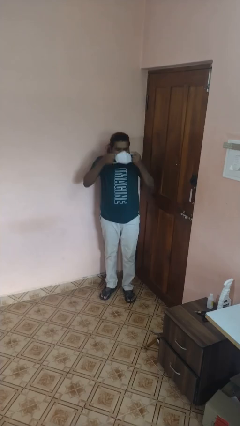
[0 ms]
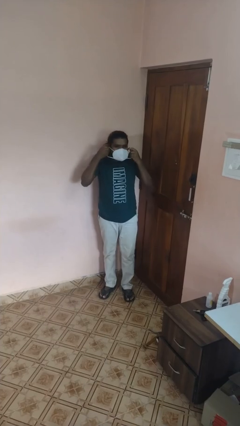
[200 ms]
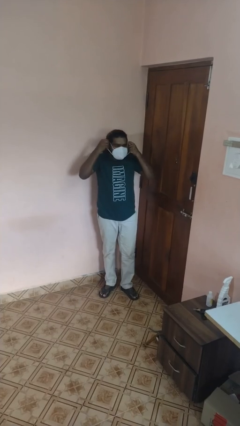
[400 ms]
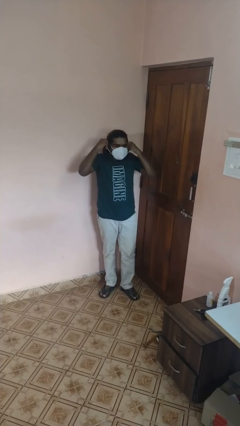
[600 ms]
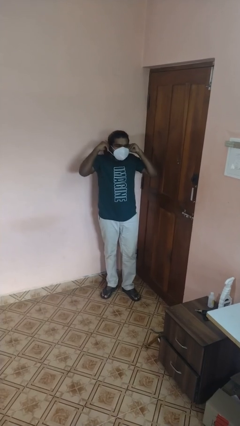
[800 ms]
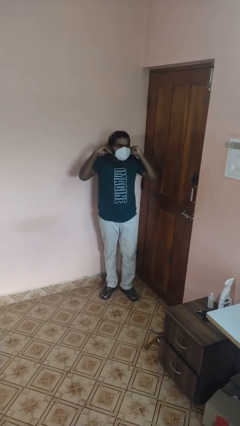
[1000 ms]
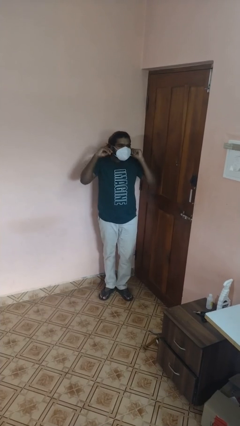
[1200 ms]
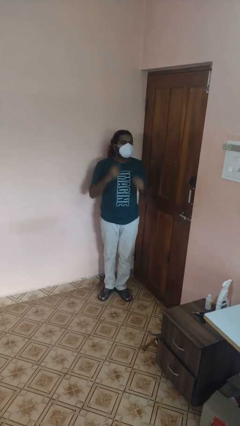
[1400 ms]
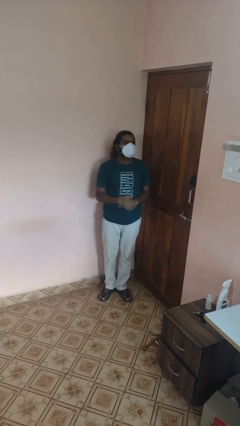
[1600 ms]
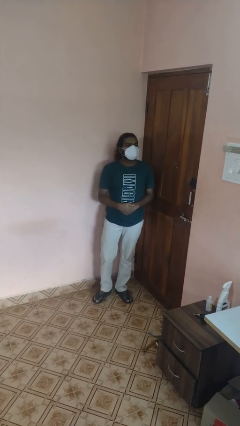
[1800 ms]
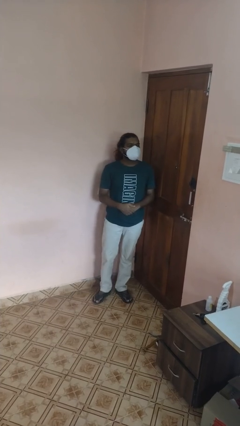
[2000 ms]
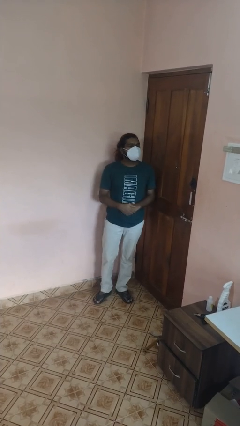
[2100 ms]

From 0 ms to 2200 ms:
person puts on facemask

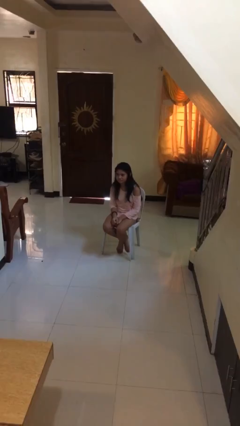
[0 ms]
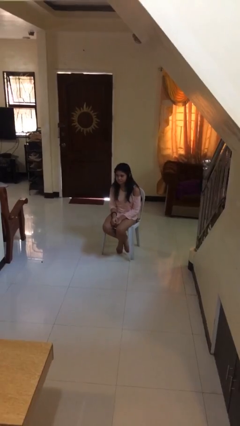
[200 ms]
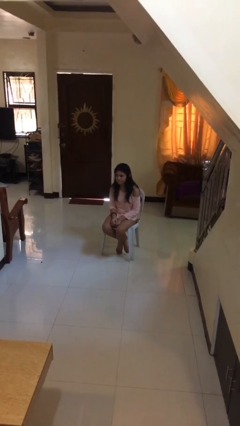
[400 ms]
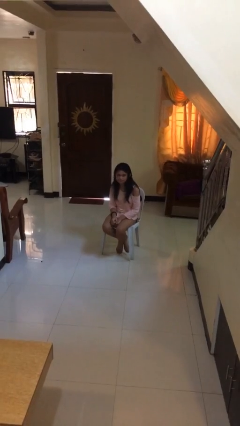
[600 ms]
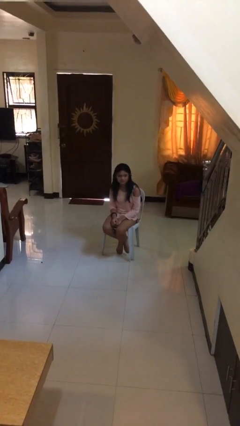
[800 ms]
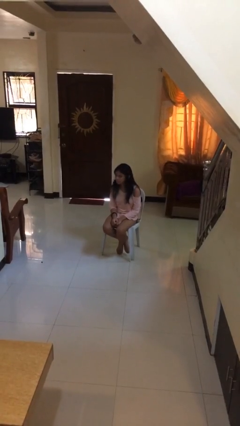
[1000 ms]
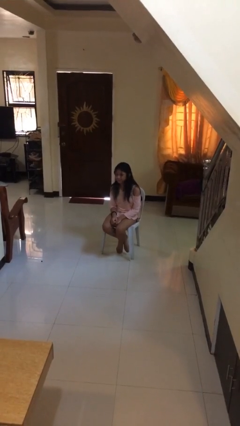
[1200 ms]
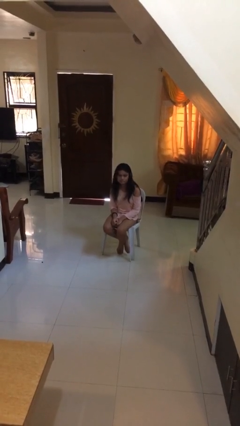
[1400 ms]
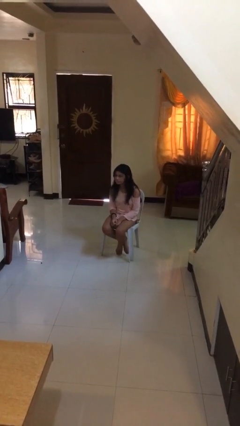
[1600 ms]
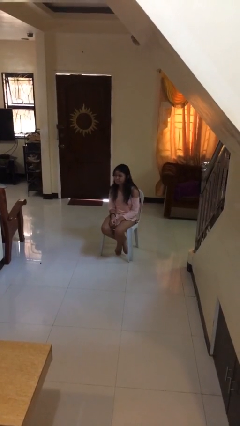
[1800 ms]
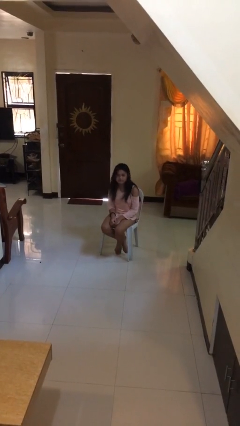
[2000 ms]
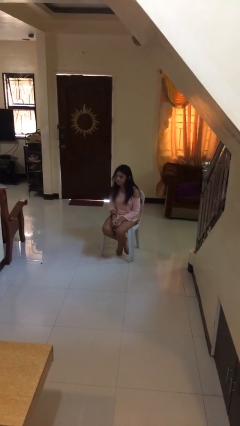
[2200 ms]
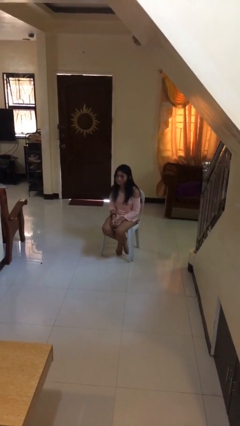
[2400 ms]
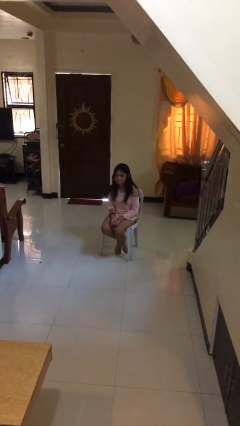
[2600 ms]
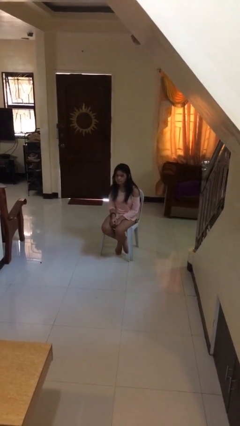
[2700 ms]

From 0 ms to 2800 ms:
person shakes head

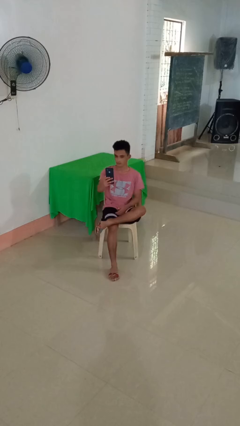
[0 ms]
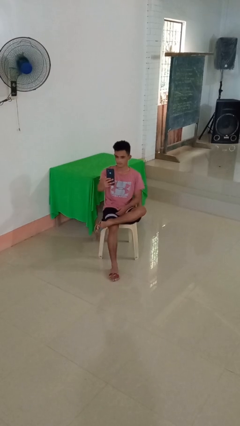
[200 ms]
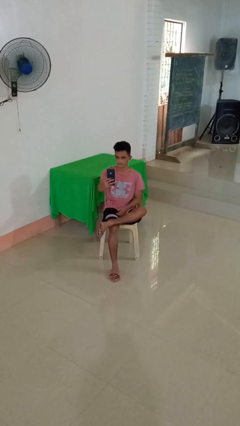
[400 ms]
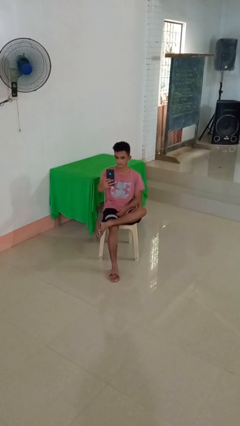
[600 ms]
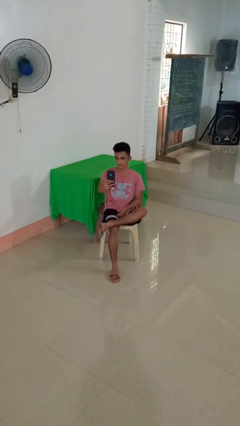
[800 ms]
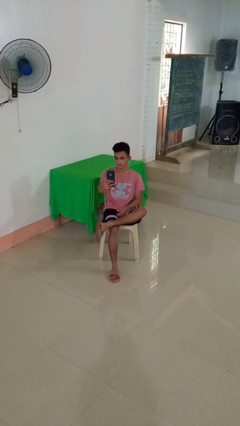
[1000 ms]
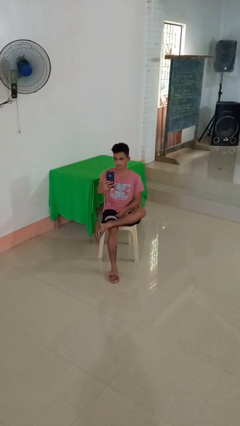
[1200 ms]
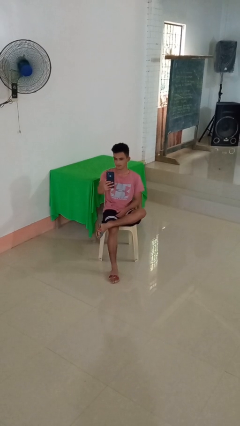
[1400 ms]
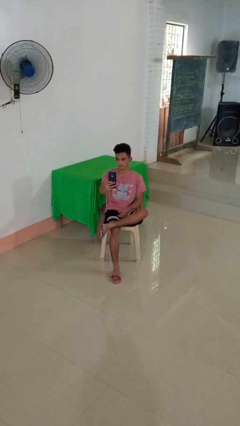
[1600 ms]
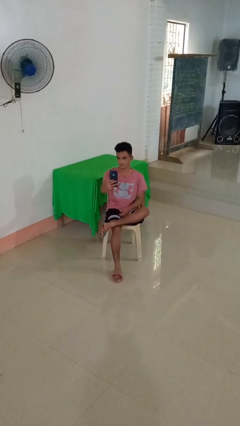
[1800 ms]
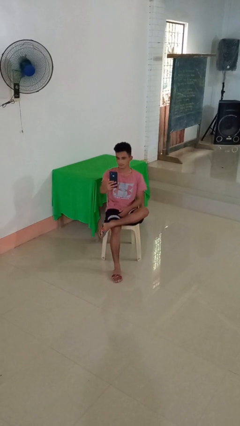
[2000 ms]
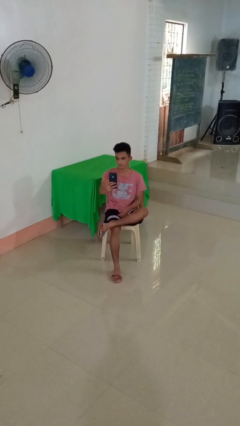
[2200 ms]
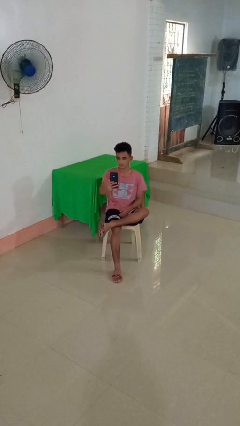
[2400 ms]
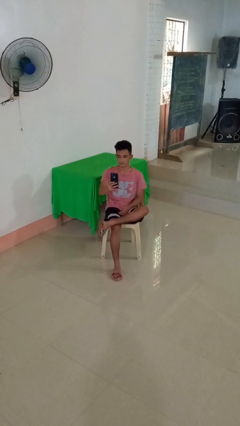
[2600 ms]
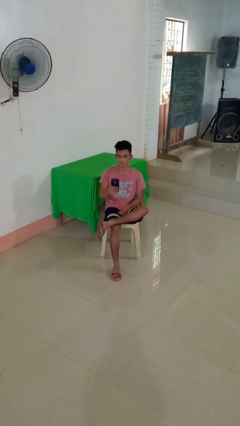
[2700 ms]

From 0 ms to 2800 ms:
person takes selfie

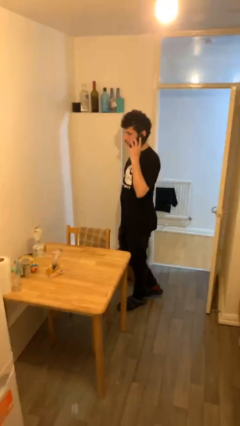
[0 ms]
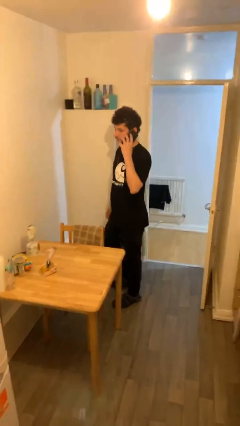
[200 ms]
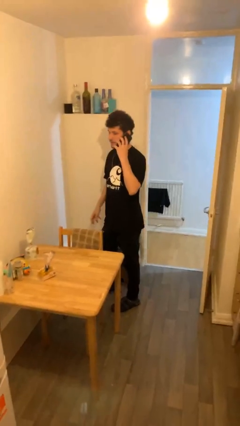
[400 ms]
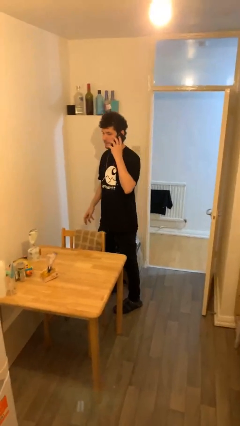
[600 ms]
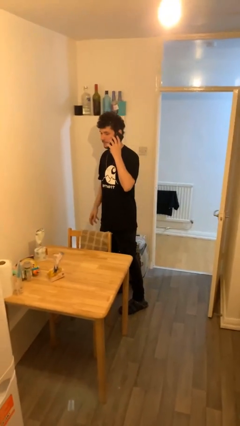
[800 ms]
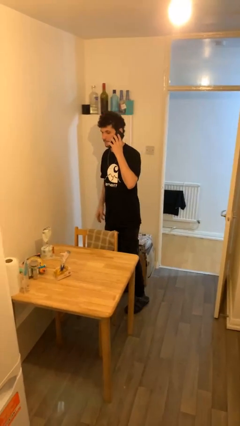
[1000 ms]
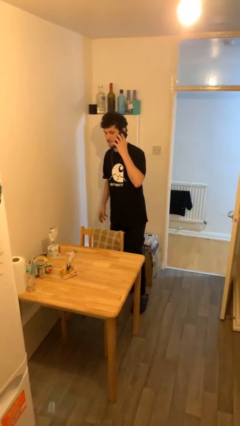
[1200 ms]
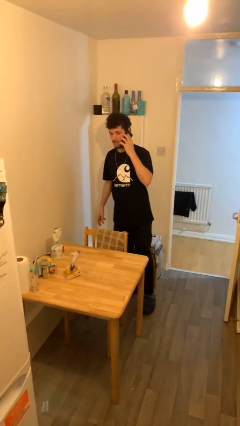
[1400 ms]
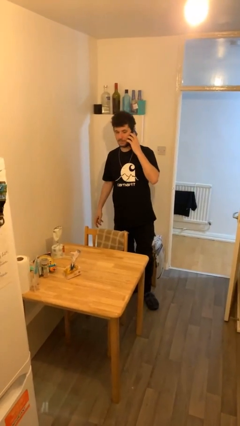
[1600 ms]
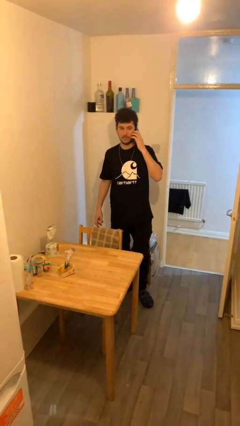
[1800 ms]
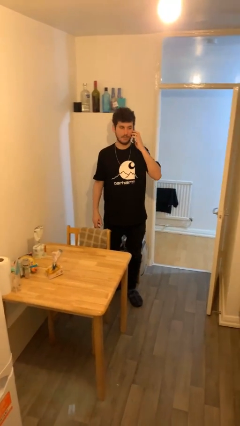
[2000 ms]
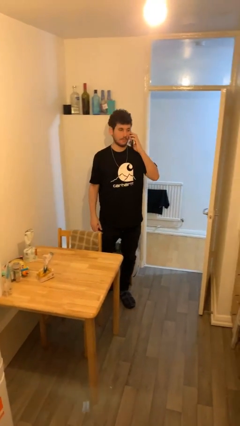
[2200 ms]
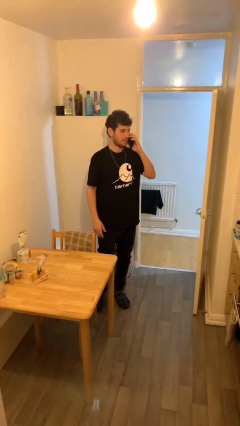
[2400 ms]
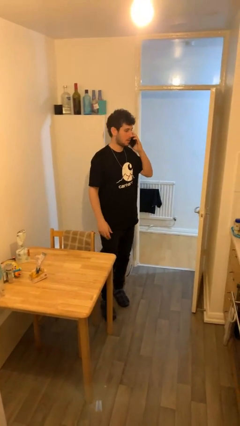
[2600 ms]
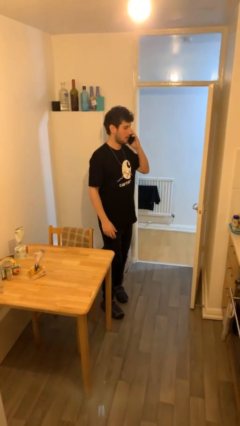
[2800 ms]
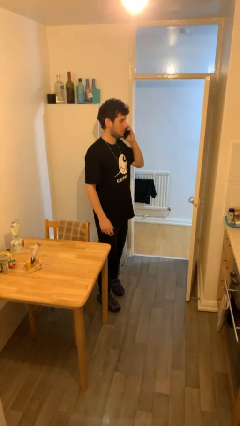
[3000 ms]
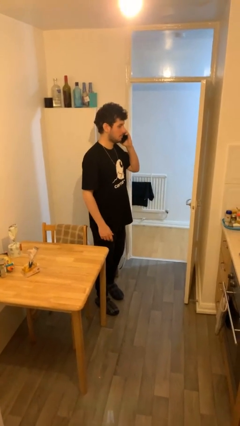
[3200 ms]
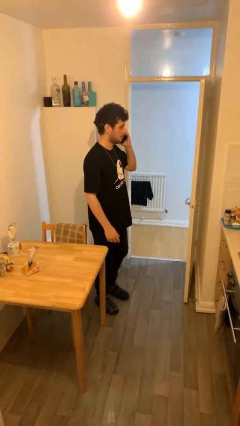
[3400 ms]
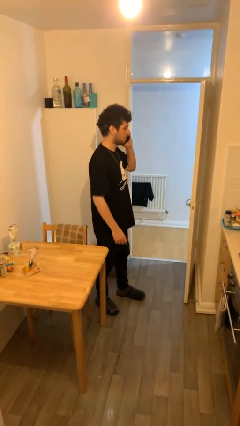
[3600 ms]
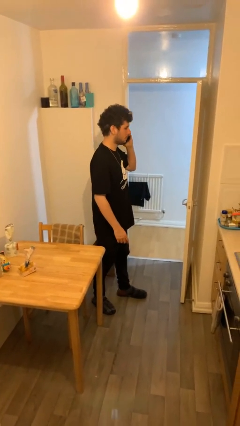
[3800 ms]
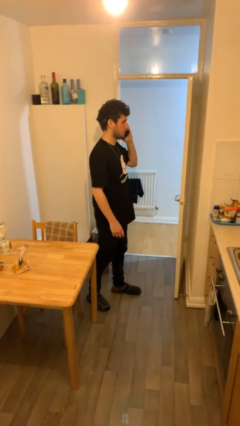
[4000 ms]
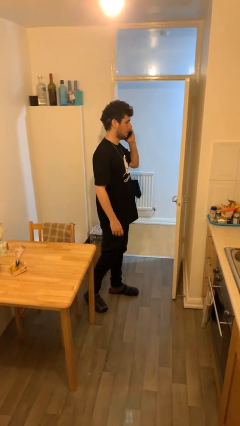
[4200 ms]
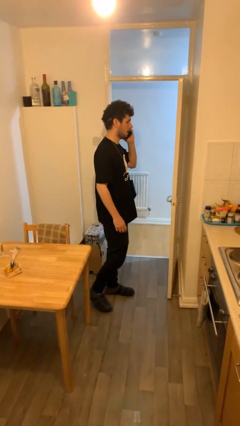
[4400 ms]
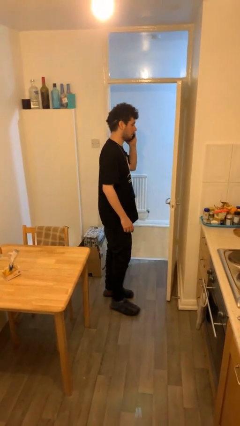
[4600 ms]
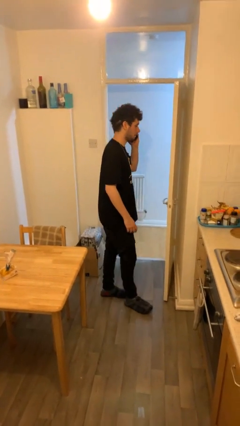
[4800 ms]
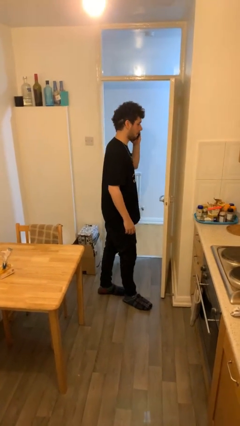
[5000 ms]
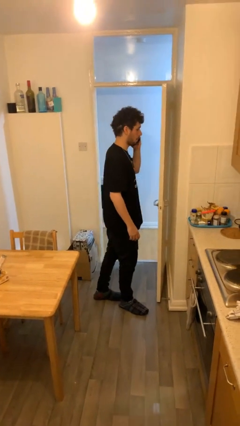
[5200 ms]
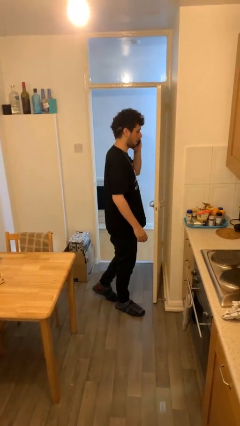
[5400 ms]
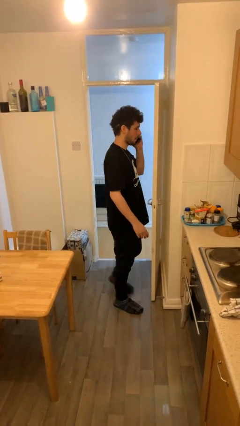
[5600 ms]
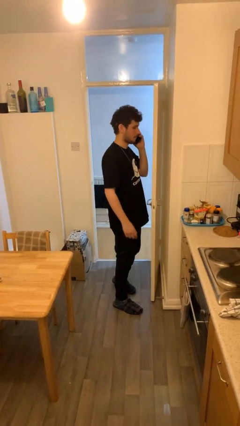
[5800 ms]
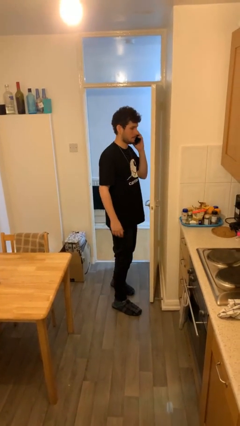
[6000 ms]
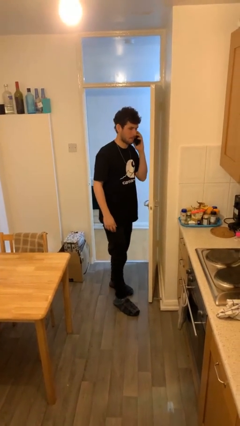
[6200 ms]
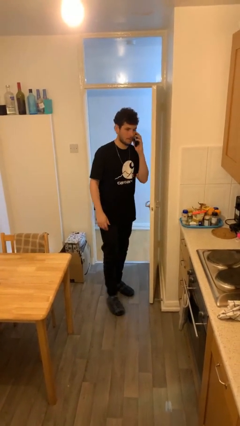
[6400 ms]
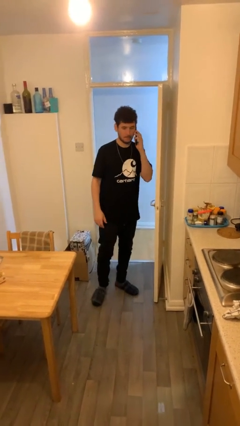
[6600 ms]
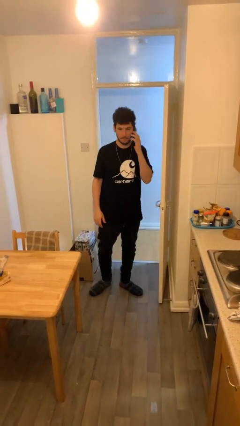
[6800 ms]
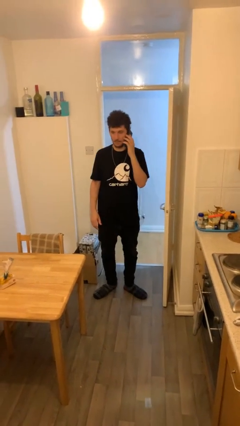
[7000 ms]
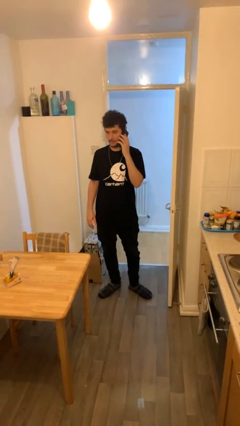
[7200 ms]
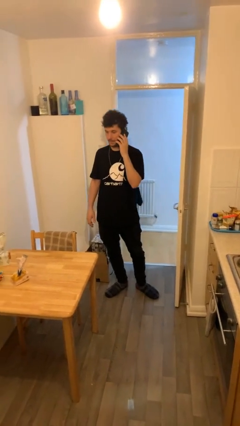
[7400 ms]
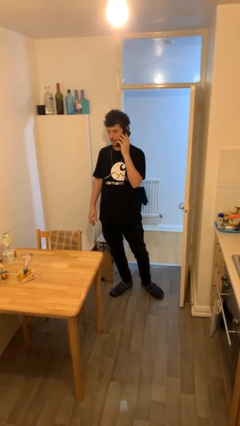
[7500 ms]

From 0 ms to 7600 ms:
person talks on phone

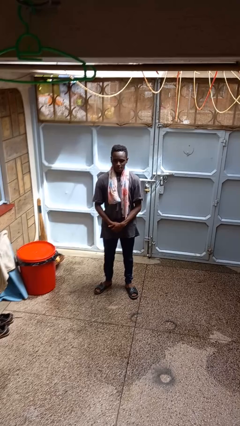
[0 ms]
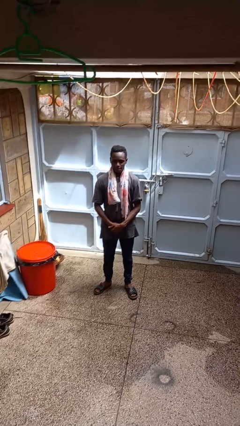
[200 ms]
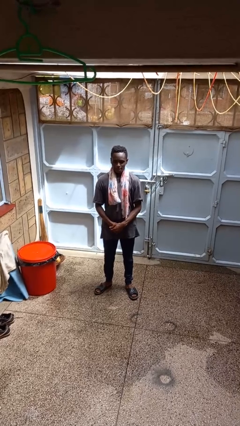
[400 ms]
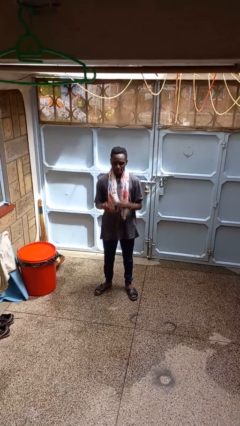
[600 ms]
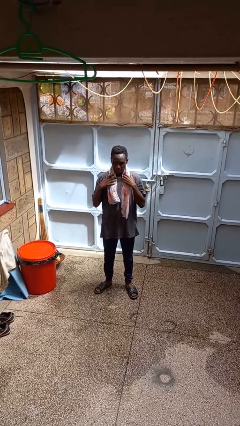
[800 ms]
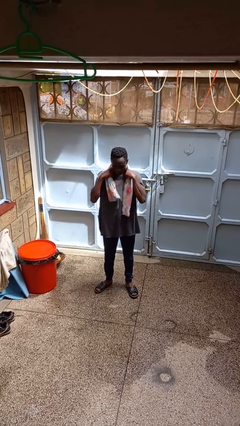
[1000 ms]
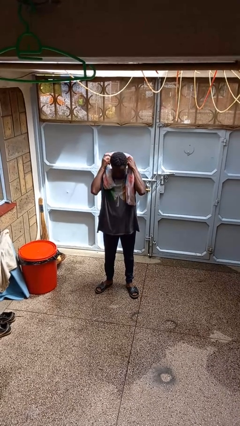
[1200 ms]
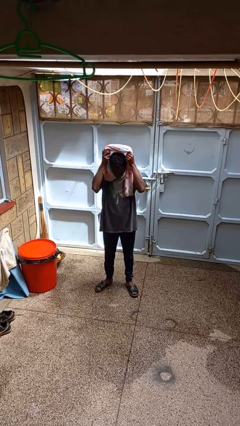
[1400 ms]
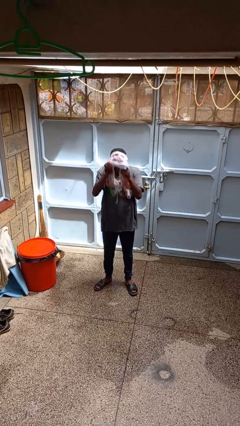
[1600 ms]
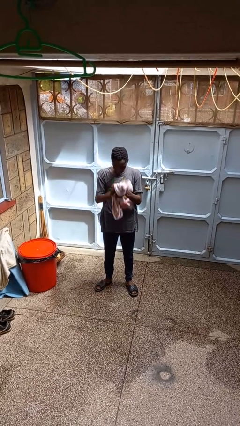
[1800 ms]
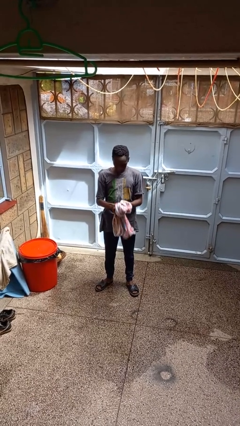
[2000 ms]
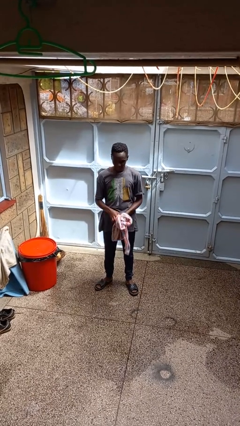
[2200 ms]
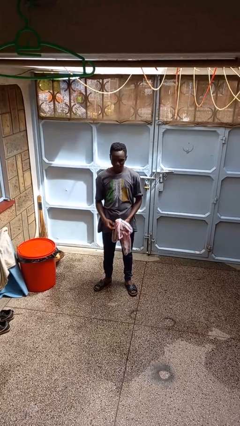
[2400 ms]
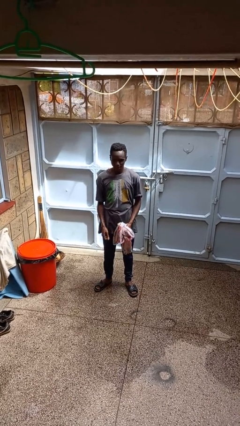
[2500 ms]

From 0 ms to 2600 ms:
person takes off scarf

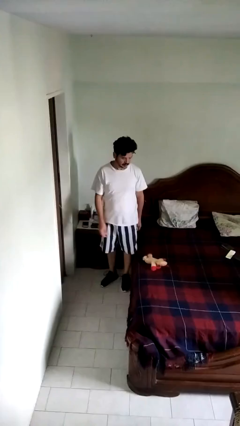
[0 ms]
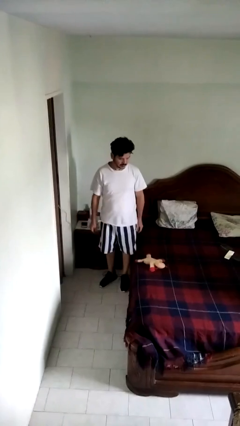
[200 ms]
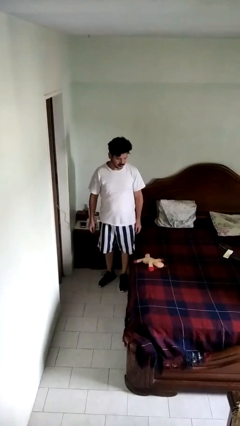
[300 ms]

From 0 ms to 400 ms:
person throws object on bed
